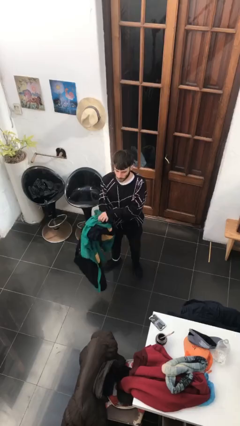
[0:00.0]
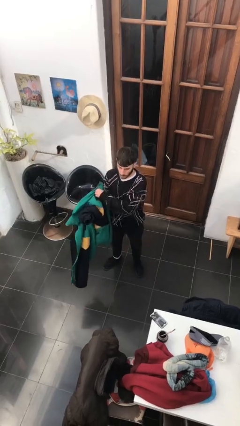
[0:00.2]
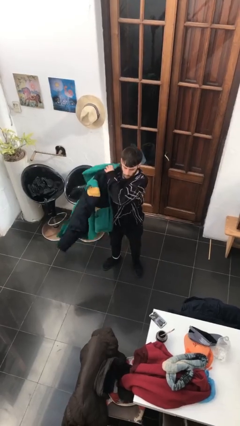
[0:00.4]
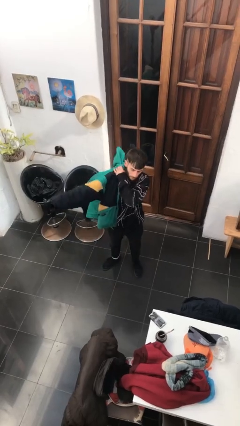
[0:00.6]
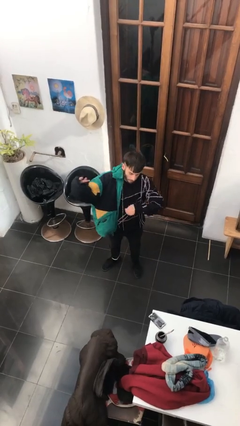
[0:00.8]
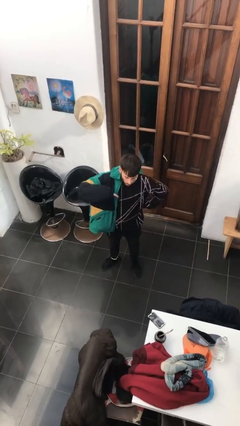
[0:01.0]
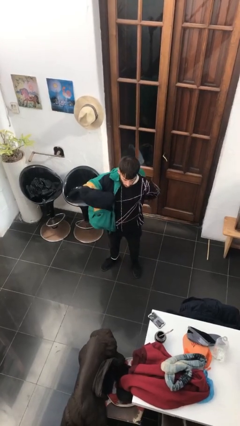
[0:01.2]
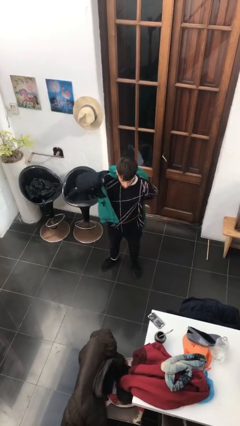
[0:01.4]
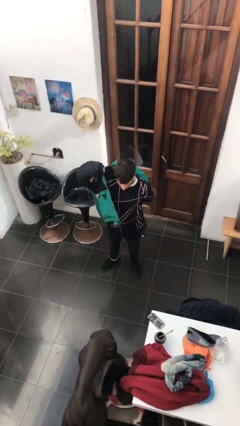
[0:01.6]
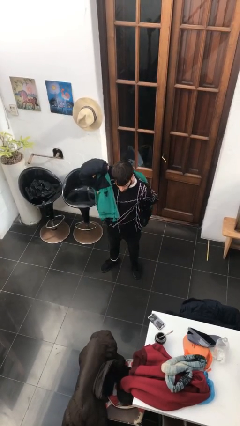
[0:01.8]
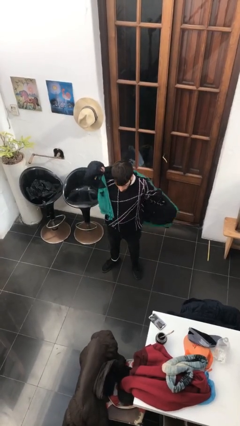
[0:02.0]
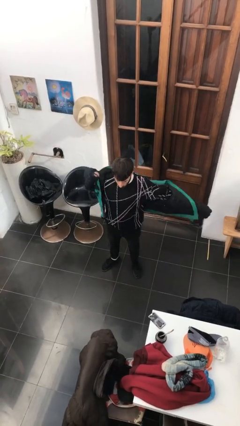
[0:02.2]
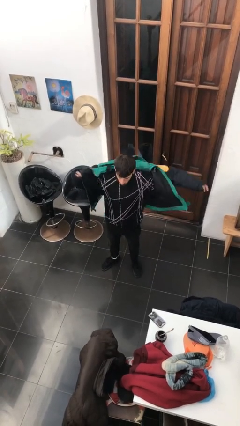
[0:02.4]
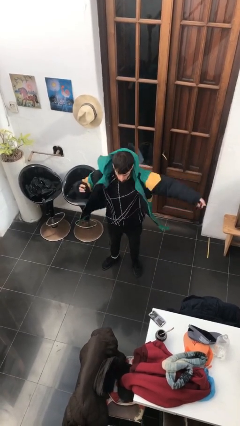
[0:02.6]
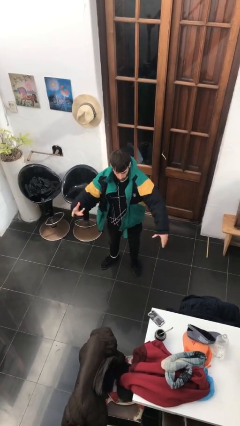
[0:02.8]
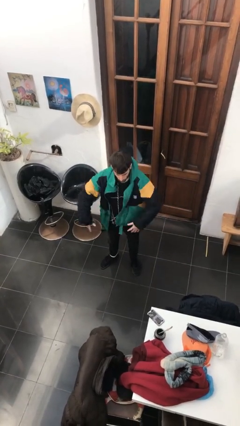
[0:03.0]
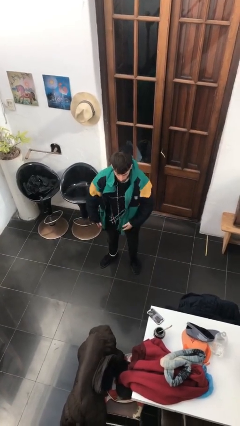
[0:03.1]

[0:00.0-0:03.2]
person puts on jacket

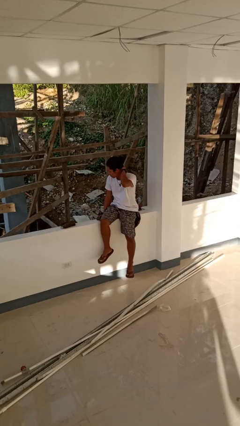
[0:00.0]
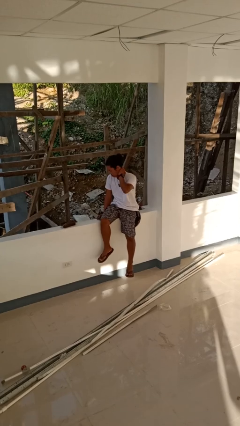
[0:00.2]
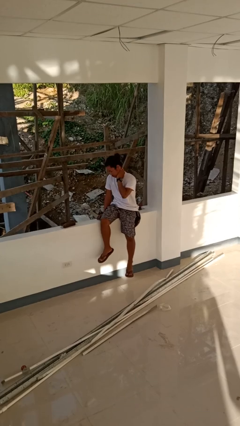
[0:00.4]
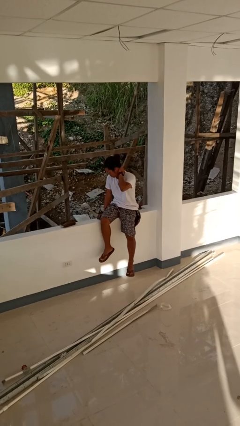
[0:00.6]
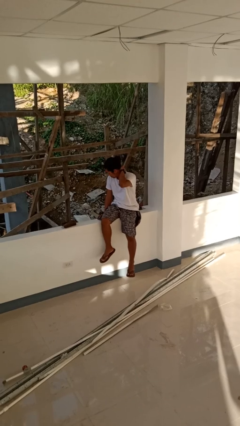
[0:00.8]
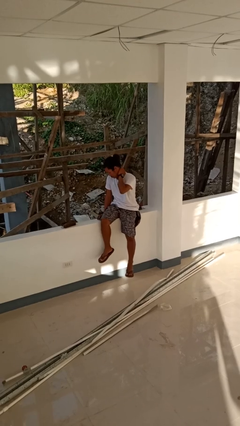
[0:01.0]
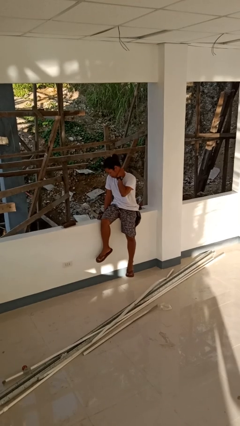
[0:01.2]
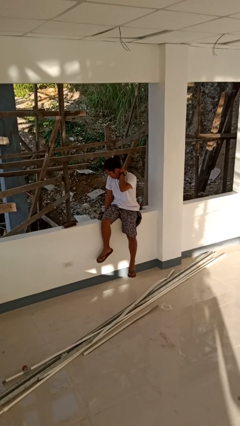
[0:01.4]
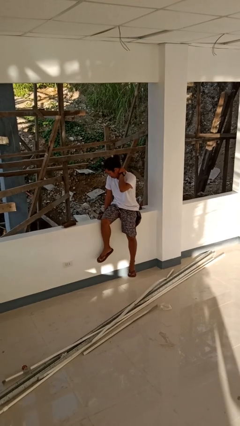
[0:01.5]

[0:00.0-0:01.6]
person rubs neck

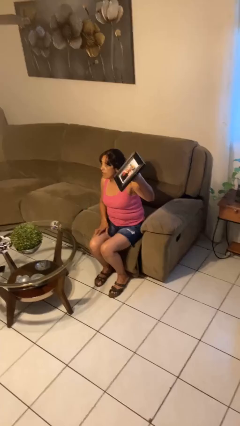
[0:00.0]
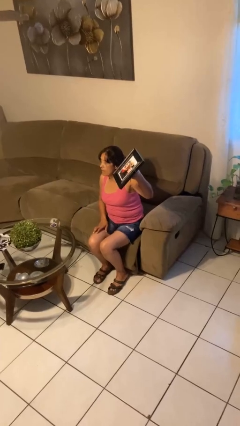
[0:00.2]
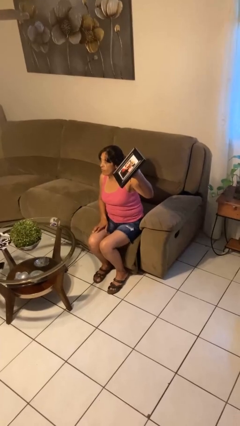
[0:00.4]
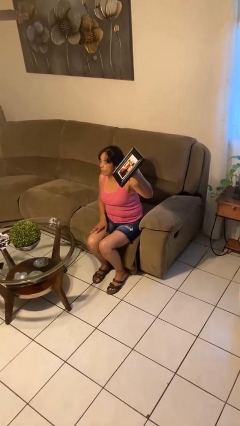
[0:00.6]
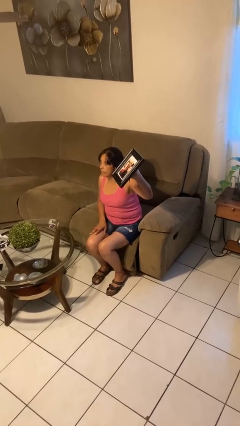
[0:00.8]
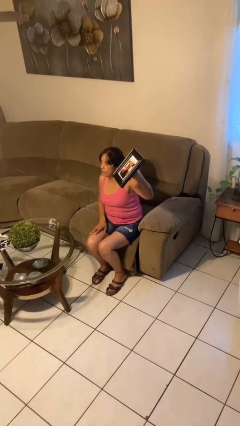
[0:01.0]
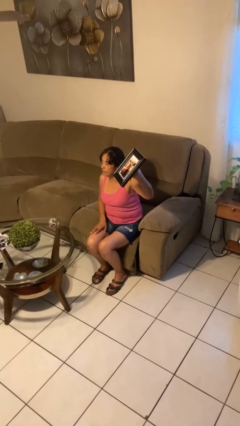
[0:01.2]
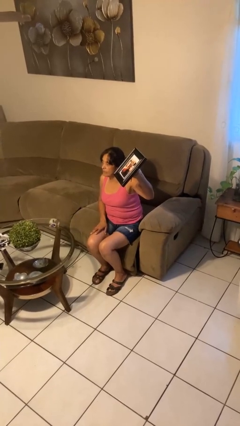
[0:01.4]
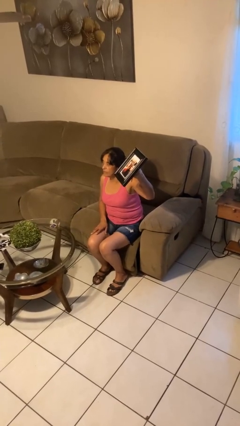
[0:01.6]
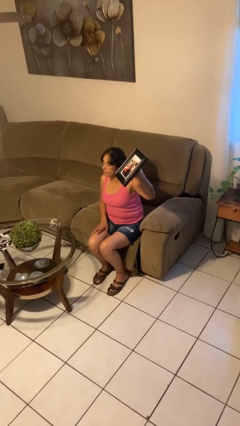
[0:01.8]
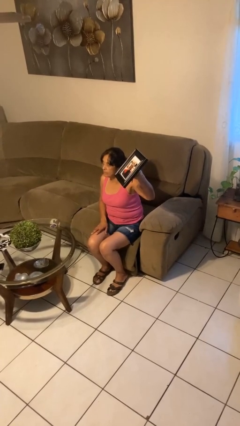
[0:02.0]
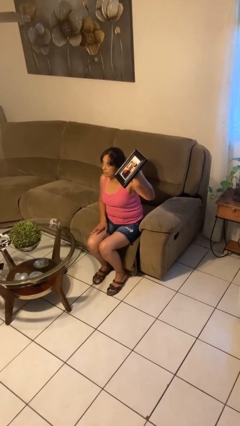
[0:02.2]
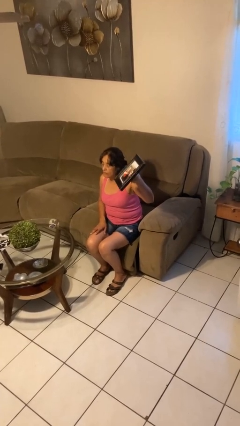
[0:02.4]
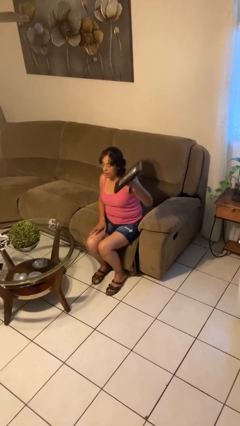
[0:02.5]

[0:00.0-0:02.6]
person holds object above head

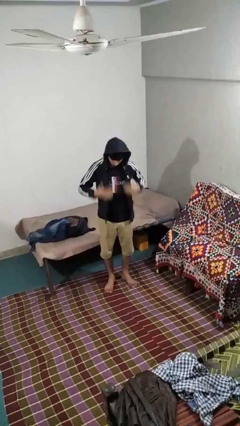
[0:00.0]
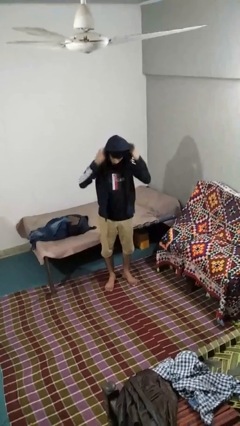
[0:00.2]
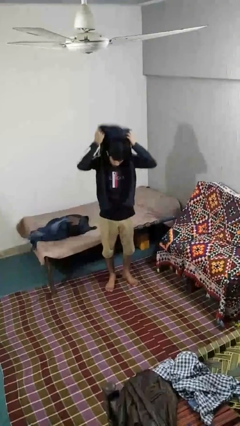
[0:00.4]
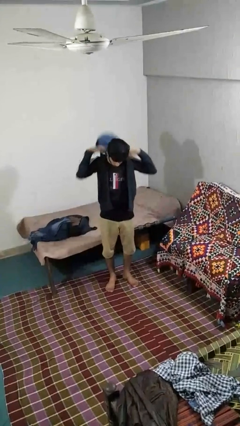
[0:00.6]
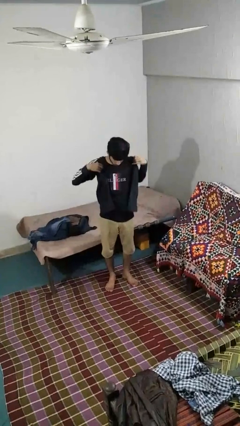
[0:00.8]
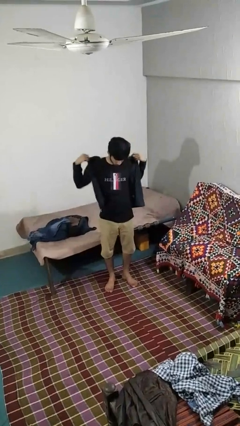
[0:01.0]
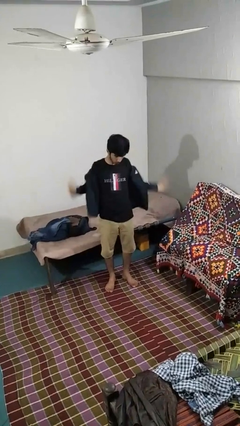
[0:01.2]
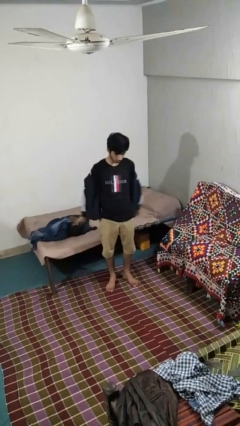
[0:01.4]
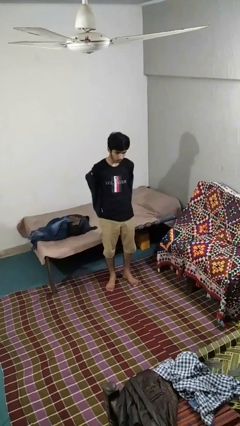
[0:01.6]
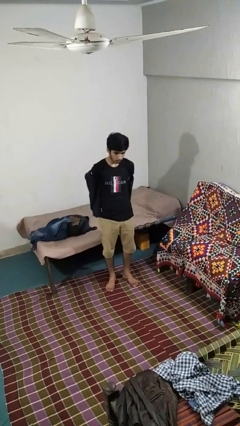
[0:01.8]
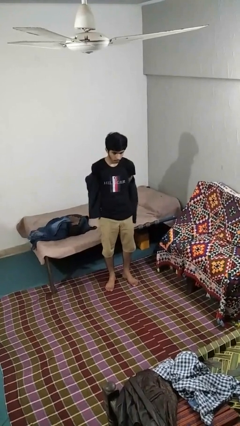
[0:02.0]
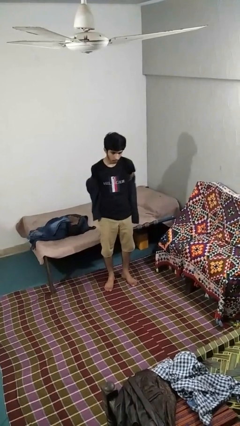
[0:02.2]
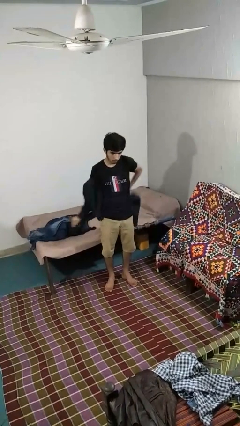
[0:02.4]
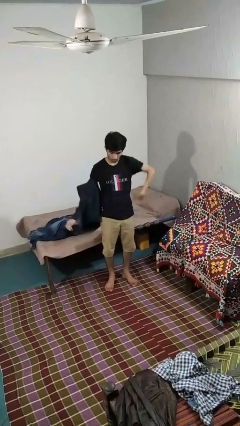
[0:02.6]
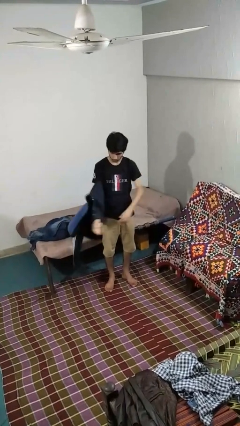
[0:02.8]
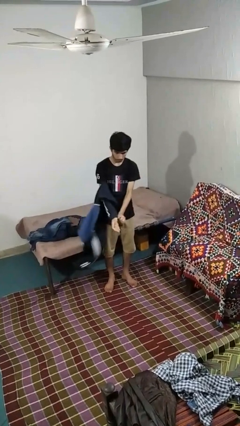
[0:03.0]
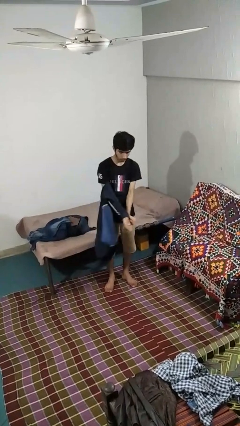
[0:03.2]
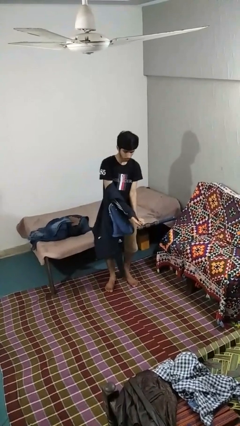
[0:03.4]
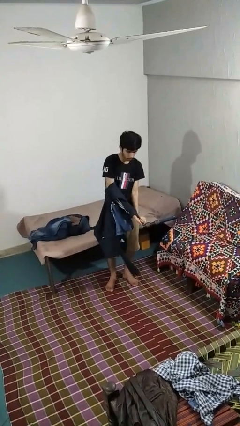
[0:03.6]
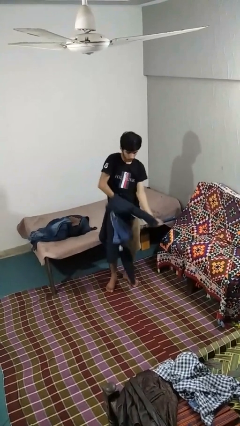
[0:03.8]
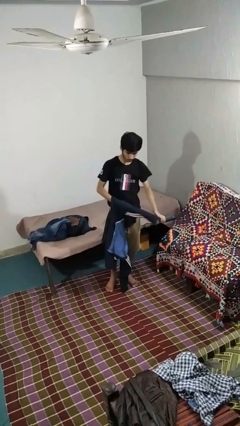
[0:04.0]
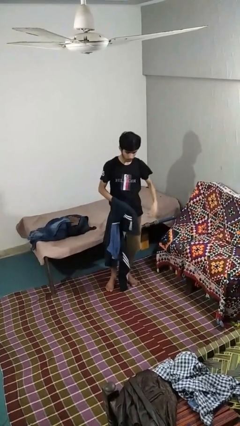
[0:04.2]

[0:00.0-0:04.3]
person takes off hoodie

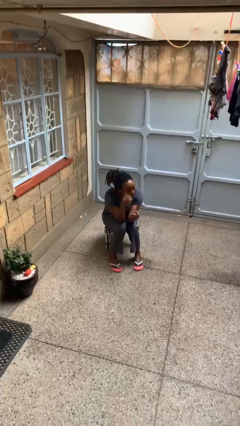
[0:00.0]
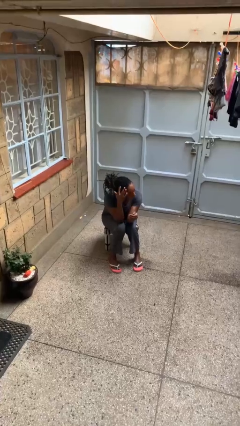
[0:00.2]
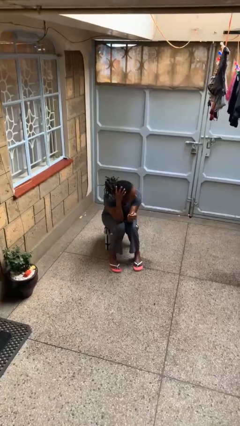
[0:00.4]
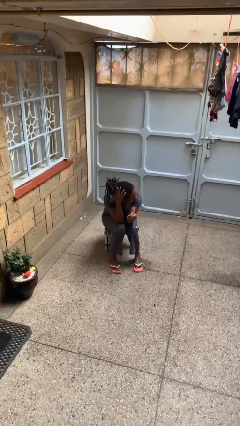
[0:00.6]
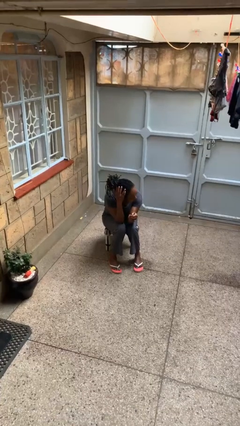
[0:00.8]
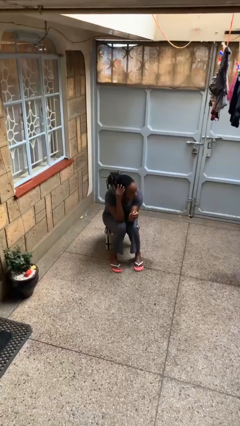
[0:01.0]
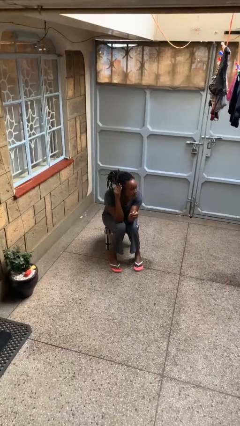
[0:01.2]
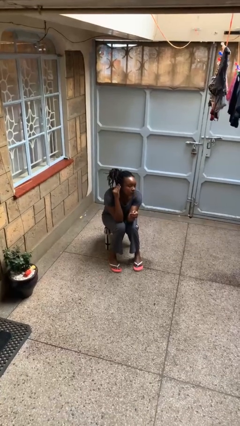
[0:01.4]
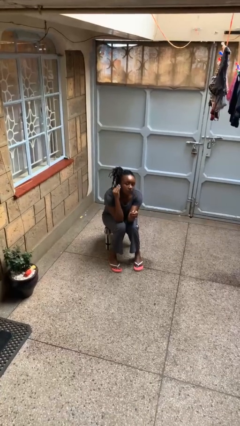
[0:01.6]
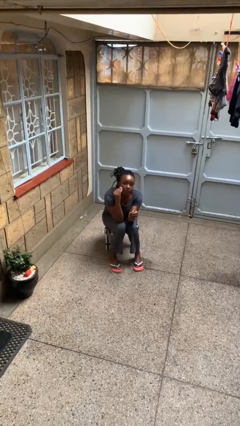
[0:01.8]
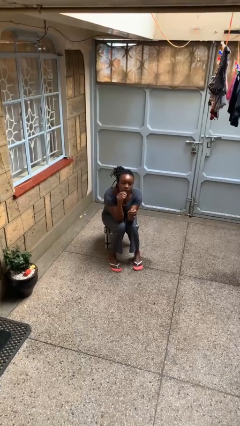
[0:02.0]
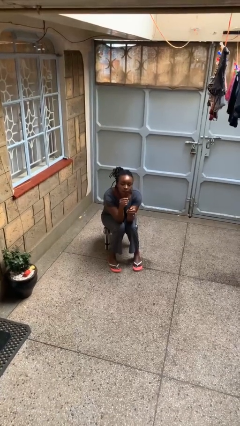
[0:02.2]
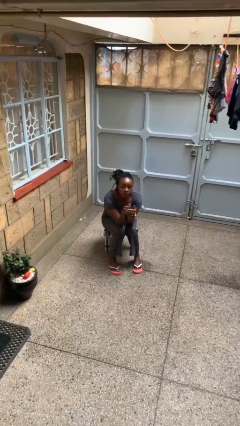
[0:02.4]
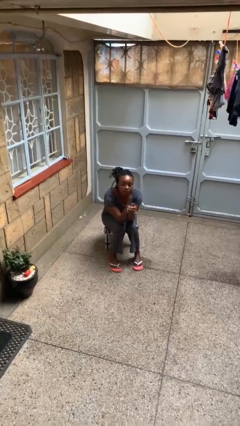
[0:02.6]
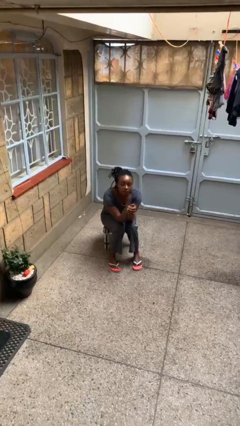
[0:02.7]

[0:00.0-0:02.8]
person strokes hair

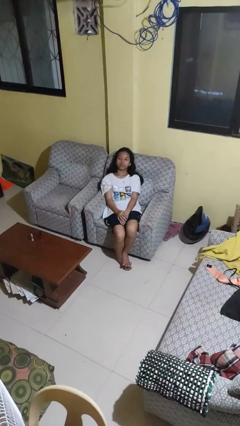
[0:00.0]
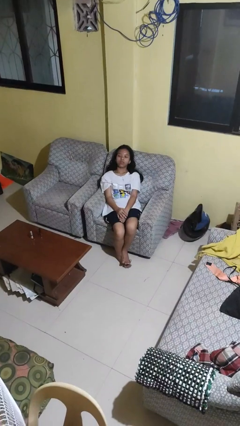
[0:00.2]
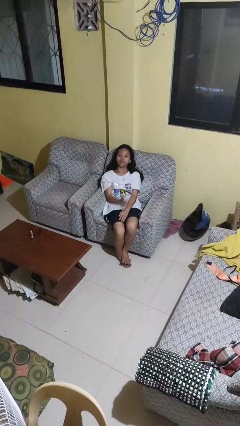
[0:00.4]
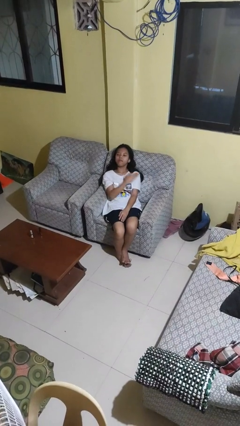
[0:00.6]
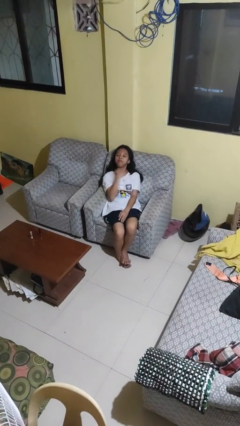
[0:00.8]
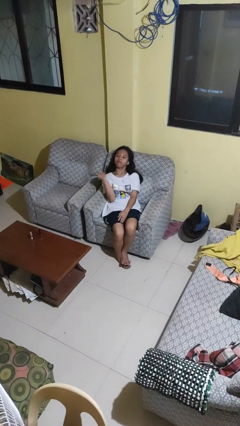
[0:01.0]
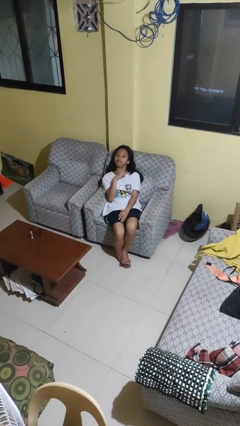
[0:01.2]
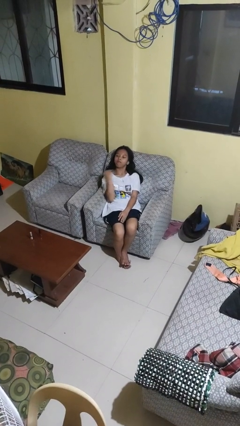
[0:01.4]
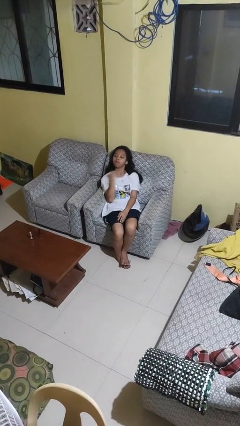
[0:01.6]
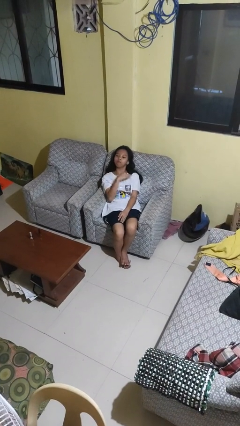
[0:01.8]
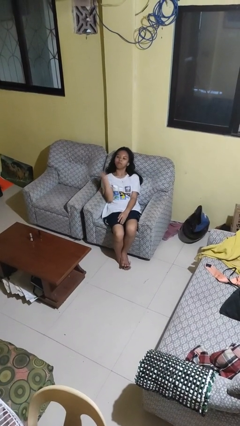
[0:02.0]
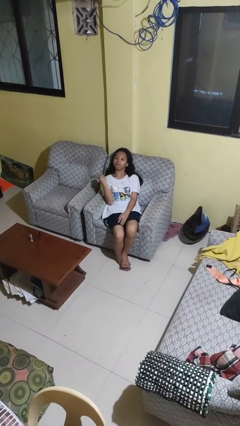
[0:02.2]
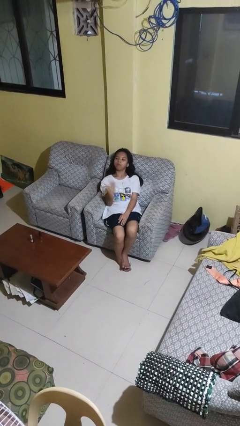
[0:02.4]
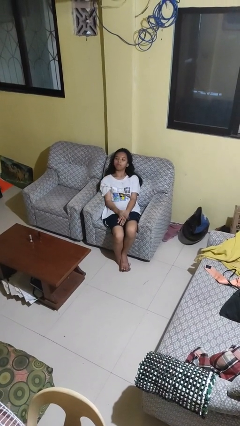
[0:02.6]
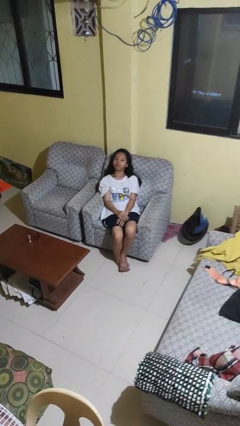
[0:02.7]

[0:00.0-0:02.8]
person gestures cut
